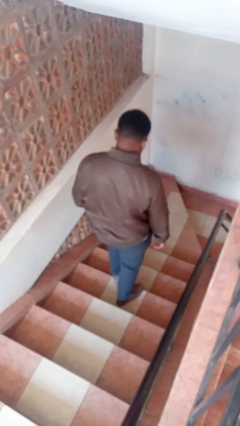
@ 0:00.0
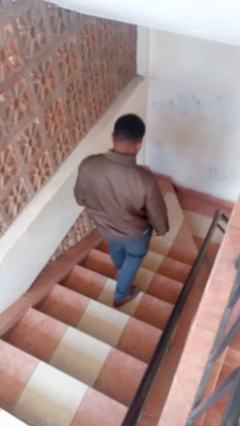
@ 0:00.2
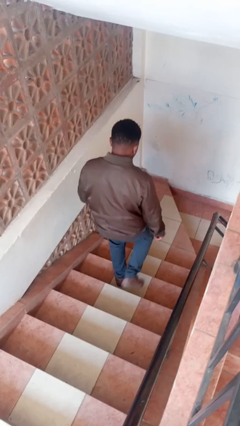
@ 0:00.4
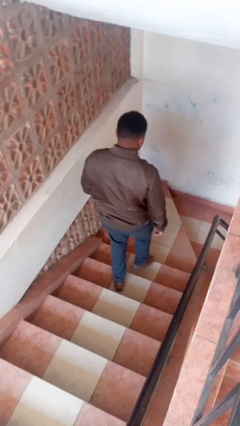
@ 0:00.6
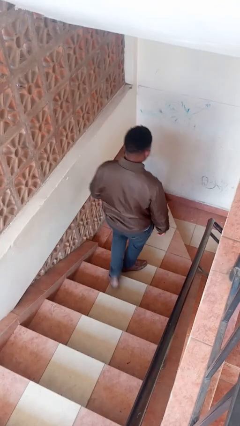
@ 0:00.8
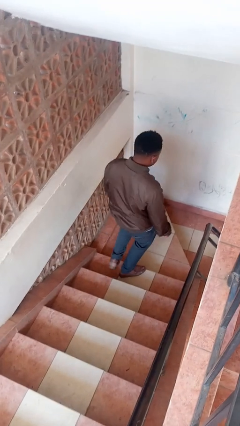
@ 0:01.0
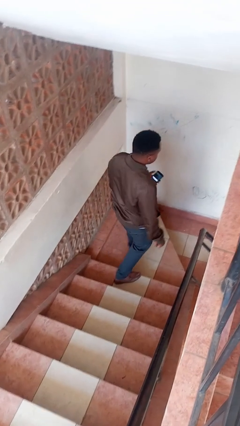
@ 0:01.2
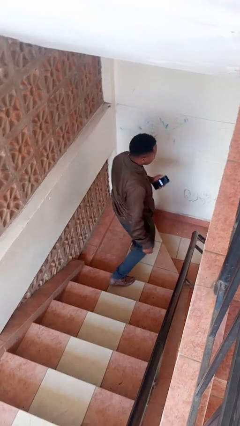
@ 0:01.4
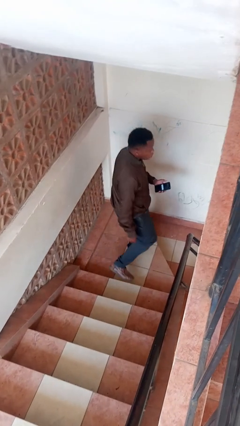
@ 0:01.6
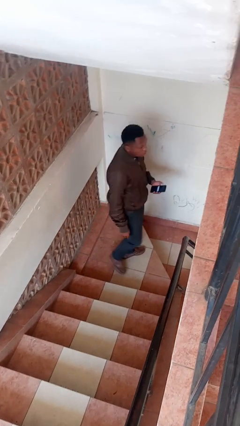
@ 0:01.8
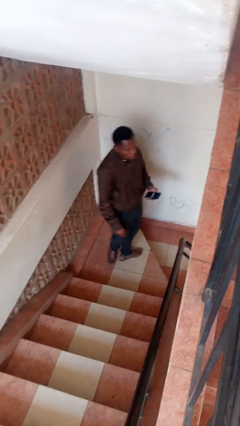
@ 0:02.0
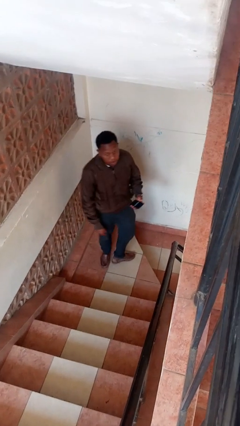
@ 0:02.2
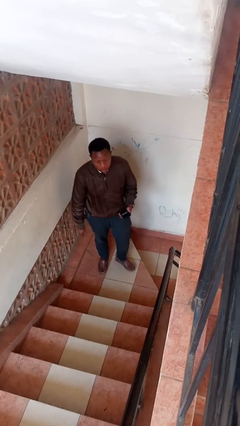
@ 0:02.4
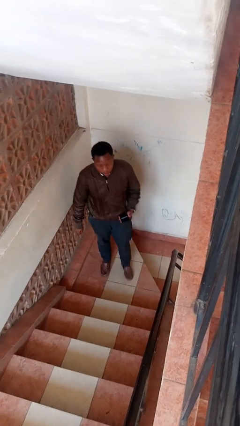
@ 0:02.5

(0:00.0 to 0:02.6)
person climbs down stairs

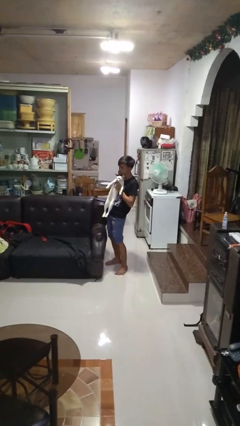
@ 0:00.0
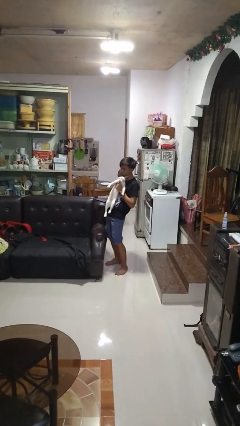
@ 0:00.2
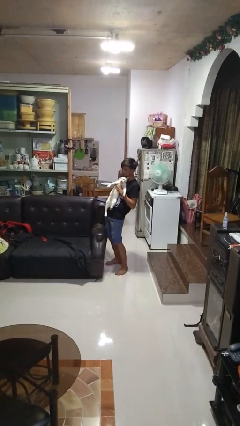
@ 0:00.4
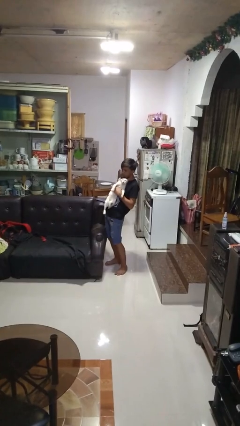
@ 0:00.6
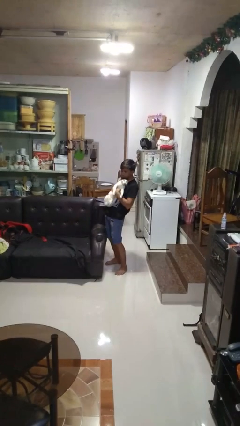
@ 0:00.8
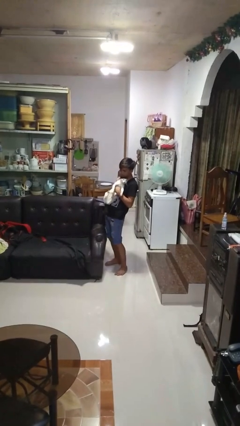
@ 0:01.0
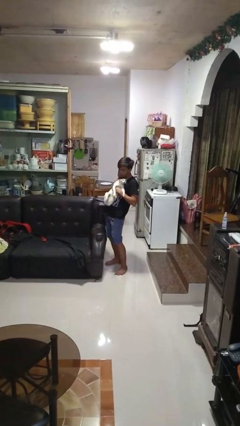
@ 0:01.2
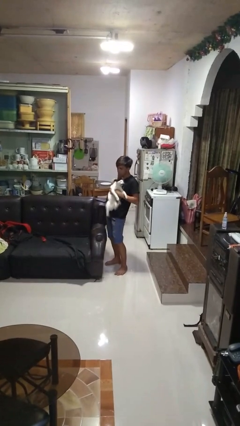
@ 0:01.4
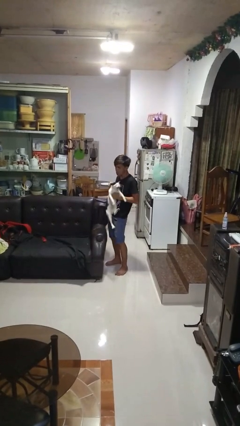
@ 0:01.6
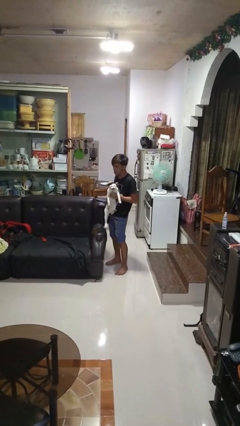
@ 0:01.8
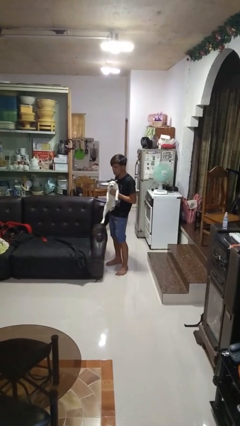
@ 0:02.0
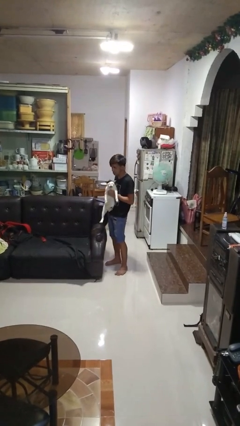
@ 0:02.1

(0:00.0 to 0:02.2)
person hugs cat

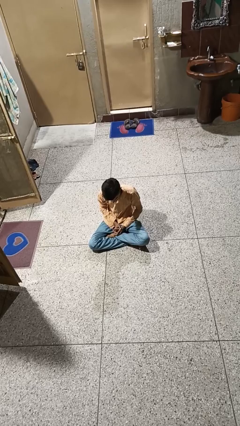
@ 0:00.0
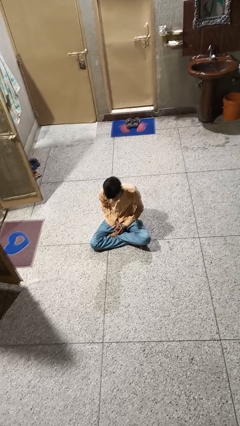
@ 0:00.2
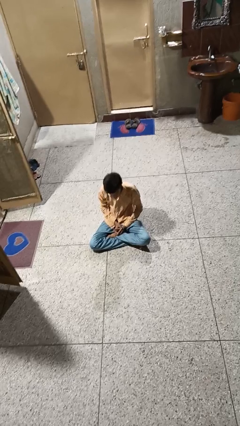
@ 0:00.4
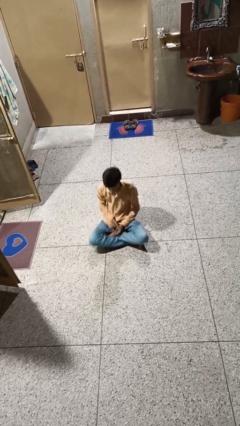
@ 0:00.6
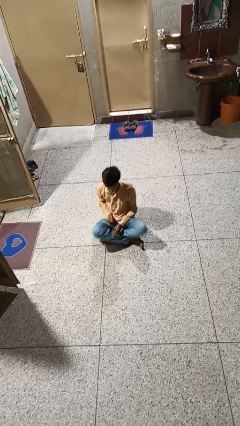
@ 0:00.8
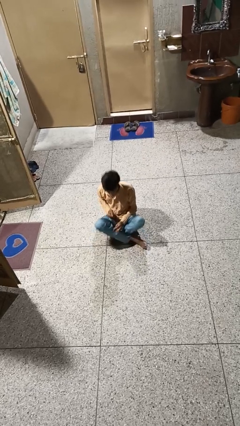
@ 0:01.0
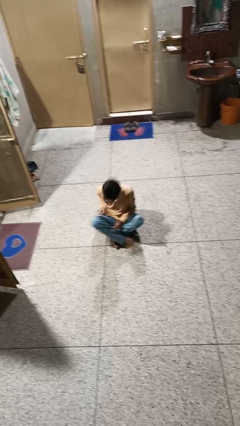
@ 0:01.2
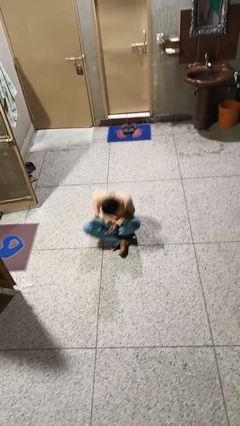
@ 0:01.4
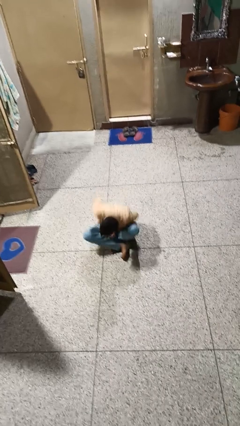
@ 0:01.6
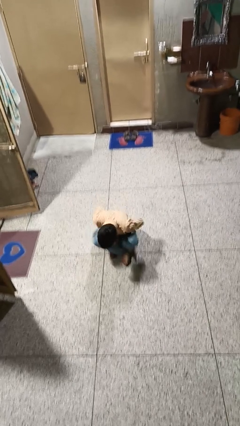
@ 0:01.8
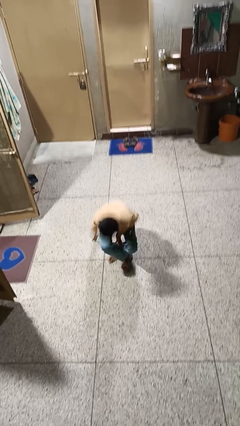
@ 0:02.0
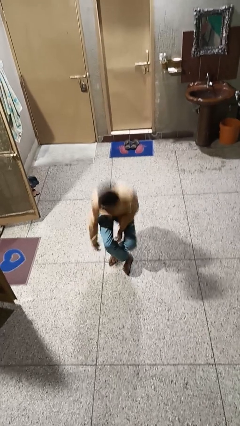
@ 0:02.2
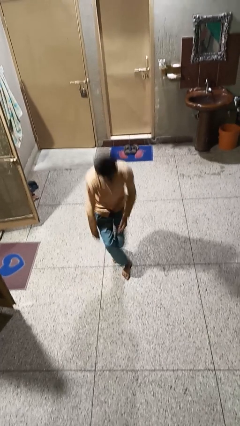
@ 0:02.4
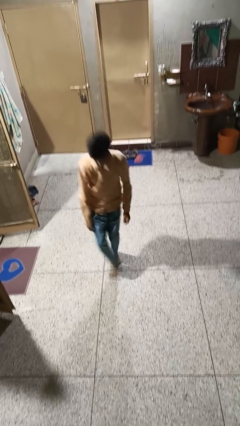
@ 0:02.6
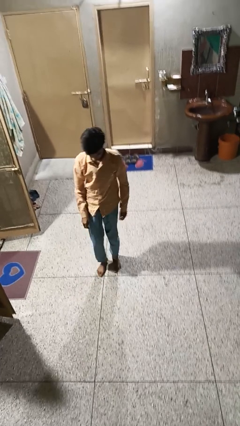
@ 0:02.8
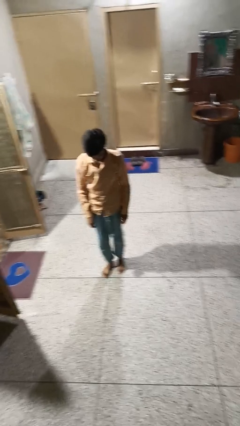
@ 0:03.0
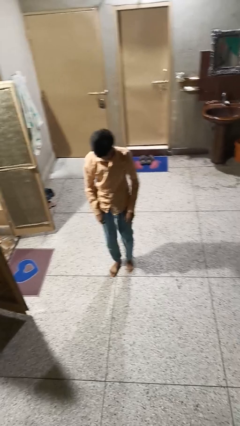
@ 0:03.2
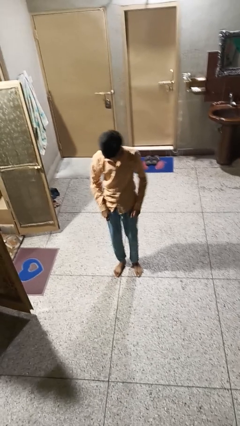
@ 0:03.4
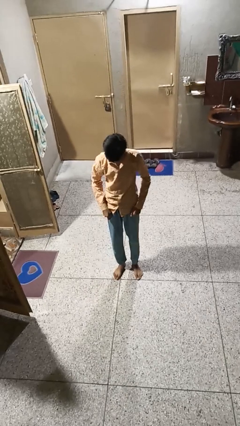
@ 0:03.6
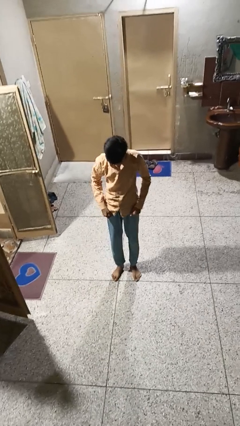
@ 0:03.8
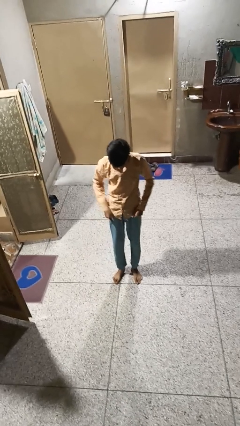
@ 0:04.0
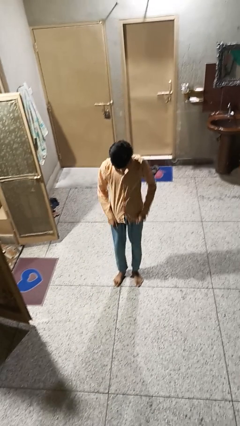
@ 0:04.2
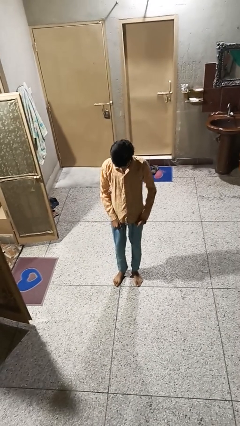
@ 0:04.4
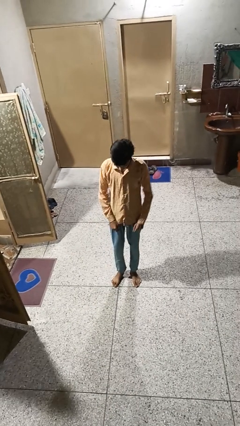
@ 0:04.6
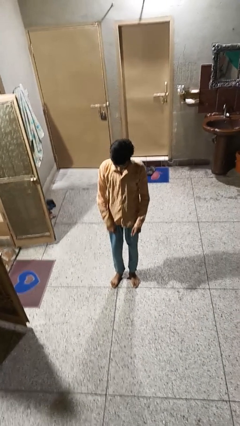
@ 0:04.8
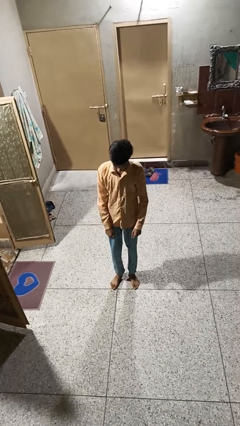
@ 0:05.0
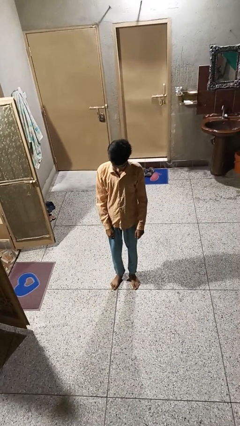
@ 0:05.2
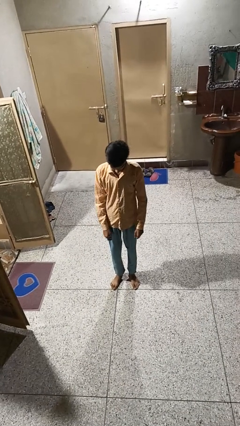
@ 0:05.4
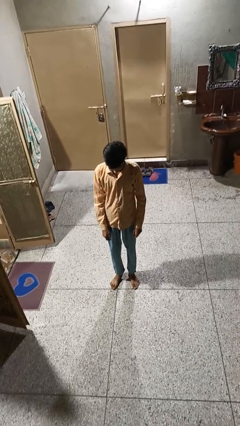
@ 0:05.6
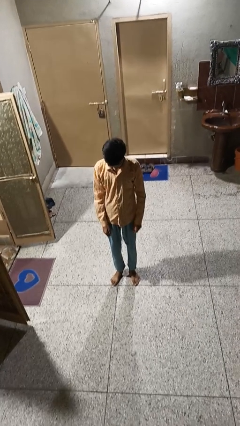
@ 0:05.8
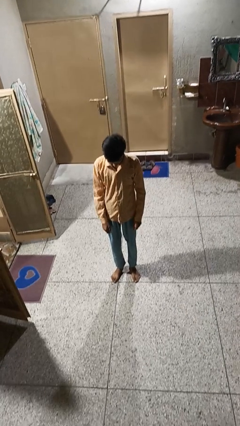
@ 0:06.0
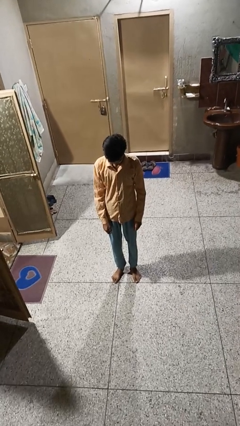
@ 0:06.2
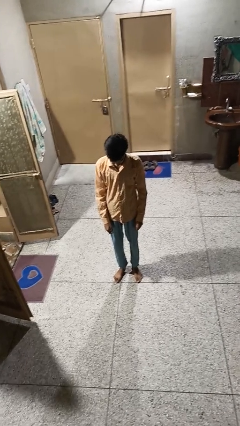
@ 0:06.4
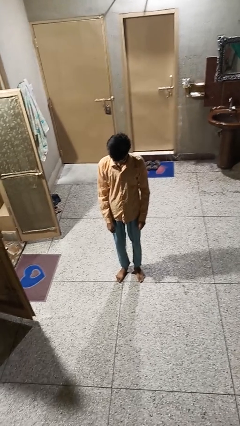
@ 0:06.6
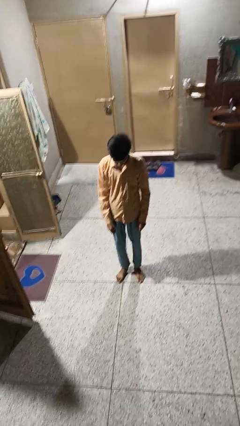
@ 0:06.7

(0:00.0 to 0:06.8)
person stands up from floor

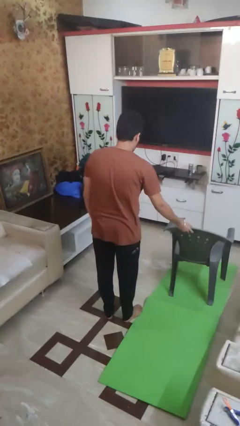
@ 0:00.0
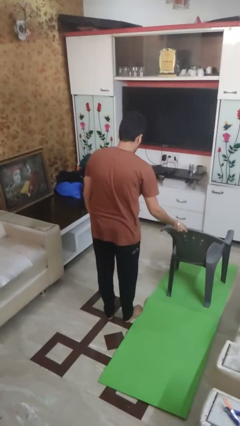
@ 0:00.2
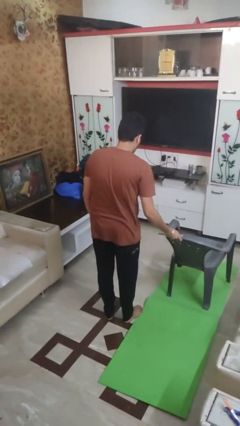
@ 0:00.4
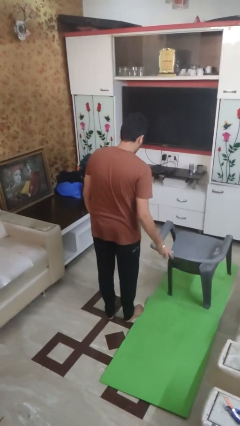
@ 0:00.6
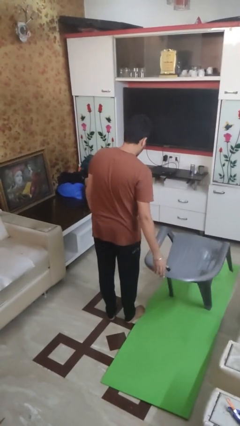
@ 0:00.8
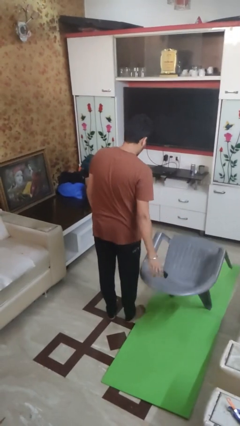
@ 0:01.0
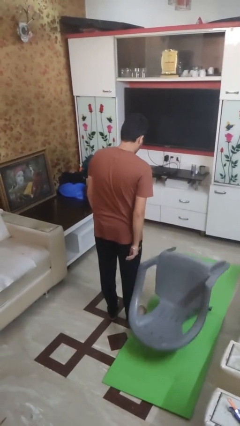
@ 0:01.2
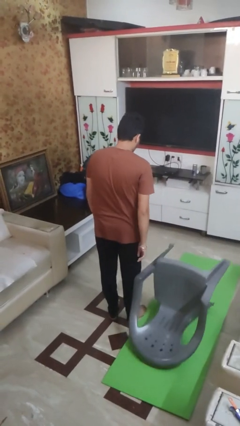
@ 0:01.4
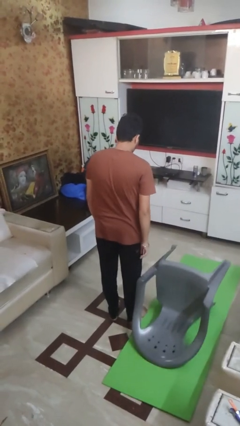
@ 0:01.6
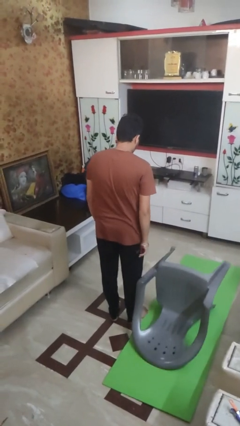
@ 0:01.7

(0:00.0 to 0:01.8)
person knocks over furniture

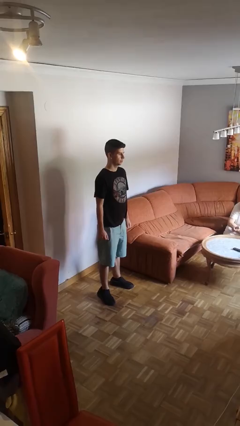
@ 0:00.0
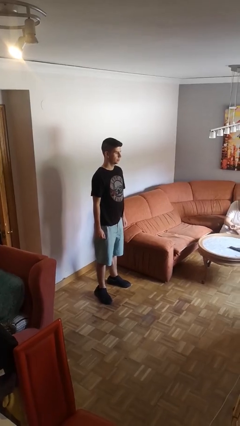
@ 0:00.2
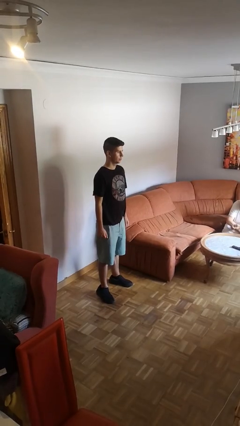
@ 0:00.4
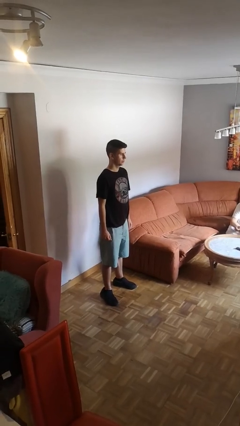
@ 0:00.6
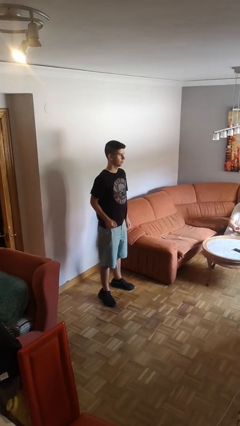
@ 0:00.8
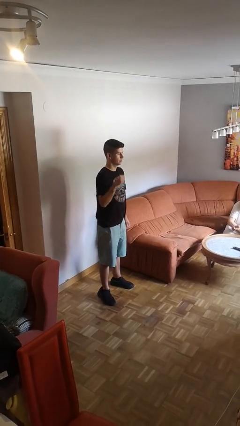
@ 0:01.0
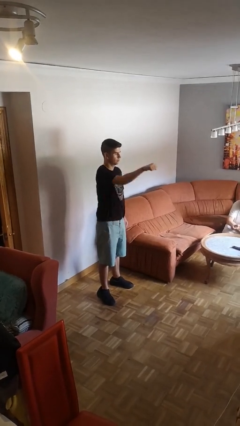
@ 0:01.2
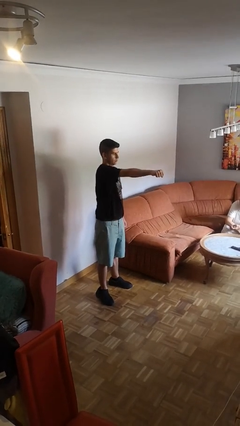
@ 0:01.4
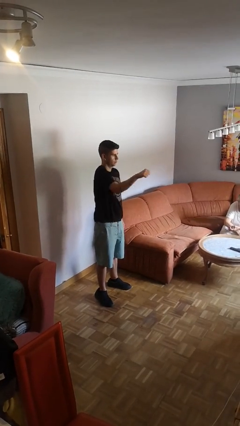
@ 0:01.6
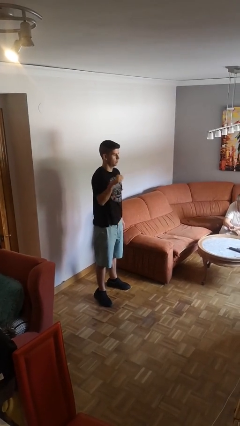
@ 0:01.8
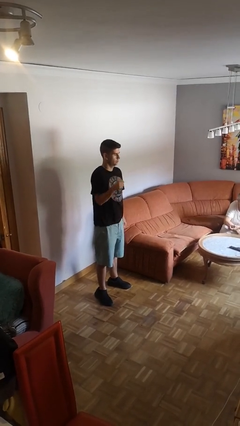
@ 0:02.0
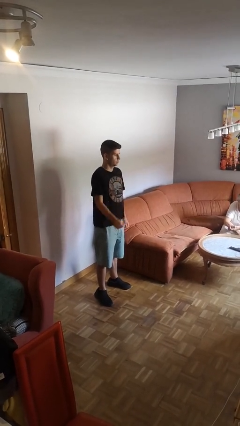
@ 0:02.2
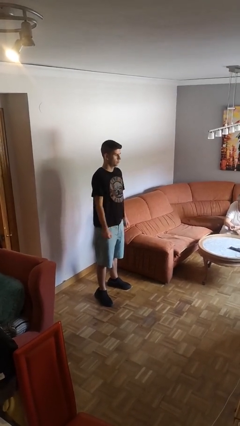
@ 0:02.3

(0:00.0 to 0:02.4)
person punches

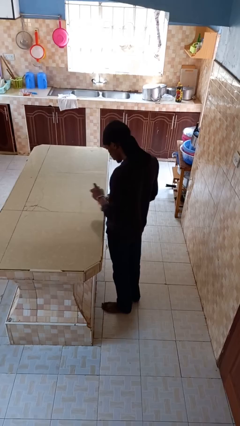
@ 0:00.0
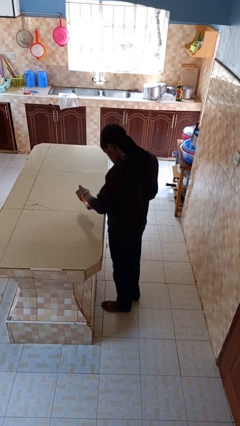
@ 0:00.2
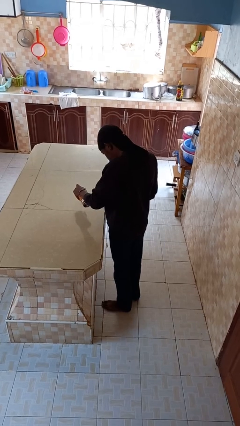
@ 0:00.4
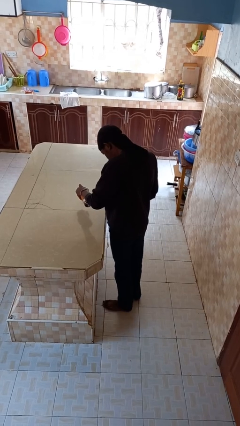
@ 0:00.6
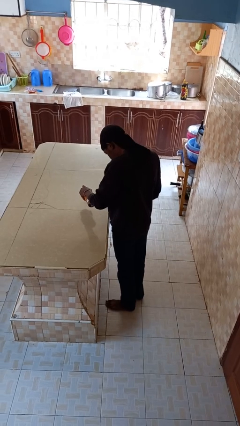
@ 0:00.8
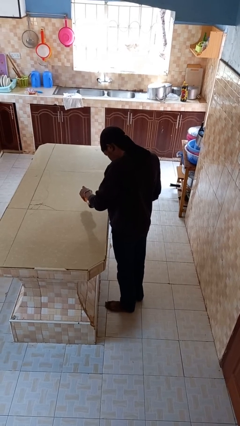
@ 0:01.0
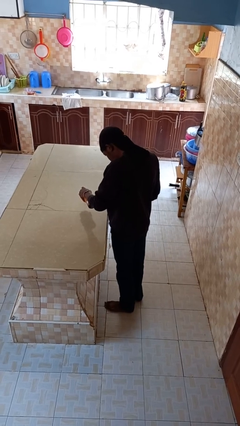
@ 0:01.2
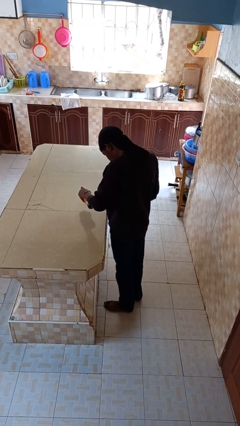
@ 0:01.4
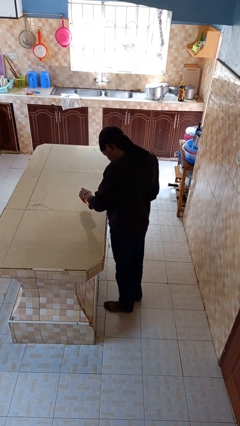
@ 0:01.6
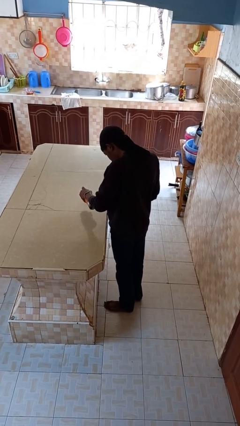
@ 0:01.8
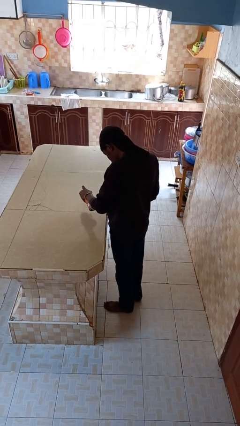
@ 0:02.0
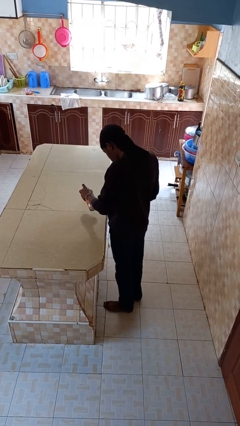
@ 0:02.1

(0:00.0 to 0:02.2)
person sprays from bottle
